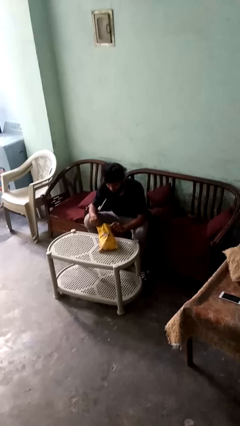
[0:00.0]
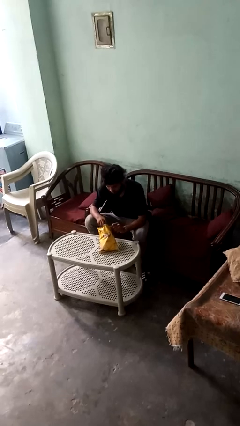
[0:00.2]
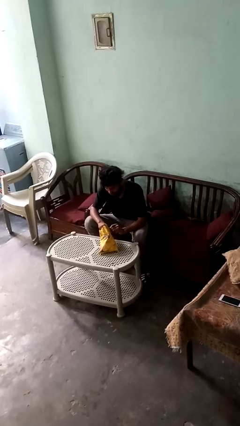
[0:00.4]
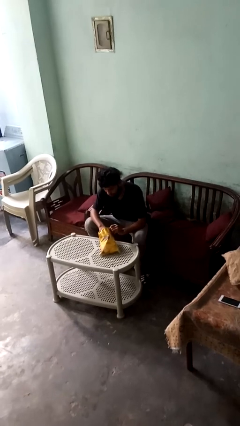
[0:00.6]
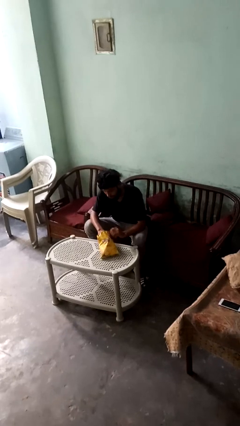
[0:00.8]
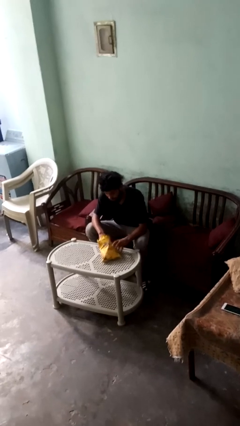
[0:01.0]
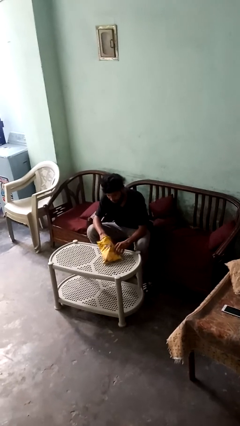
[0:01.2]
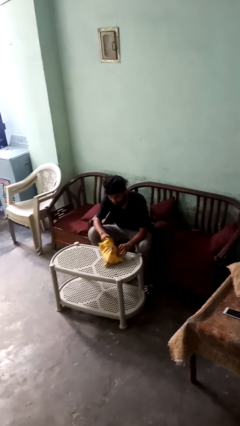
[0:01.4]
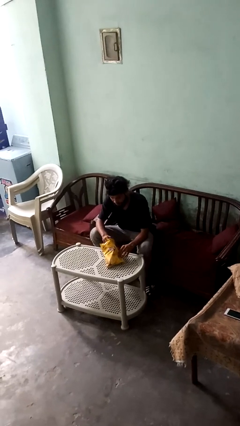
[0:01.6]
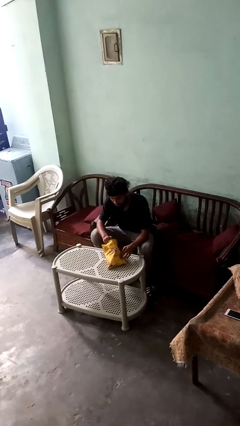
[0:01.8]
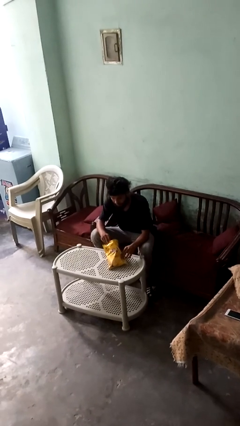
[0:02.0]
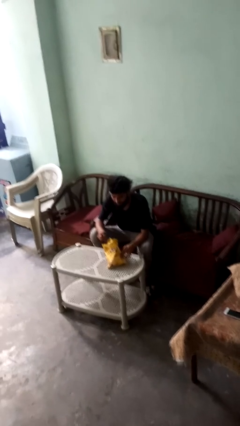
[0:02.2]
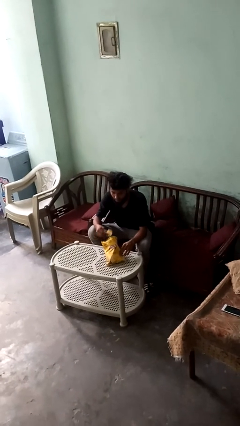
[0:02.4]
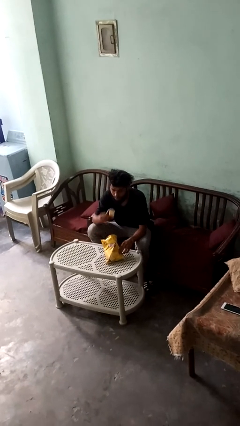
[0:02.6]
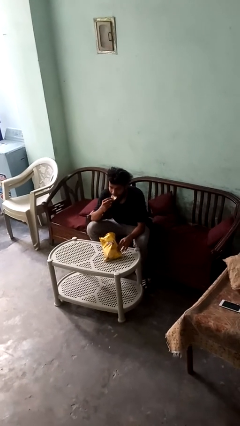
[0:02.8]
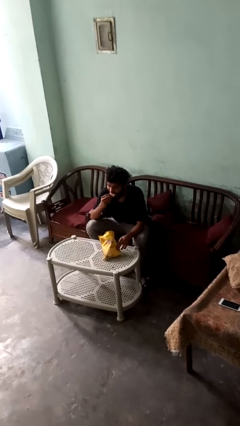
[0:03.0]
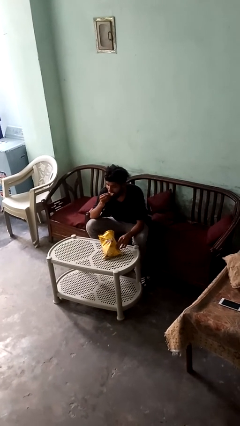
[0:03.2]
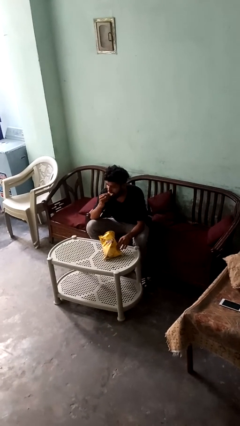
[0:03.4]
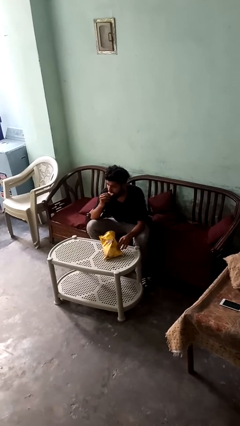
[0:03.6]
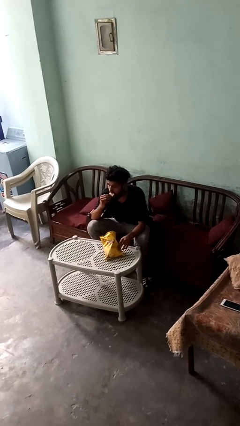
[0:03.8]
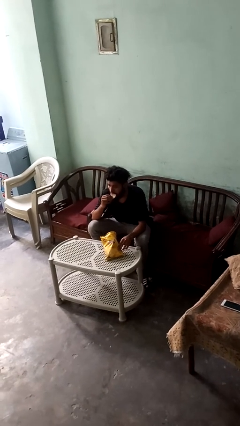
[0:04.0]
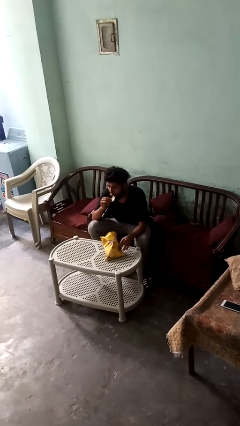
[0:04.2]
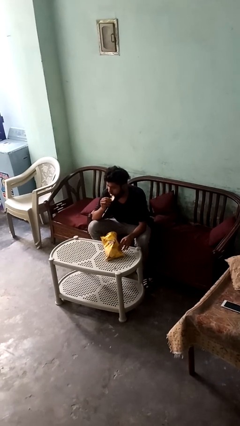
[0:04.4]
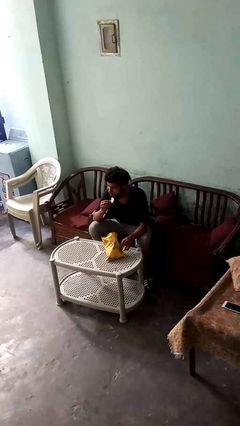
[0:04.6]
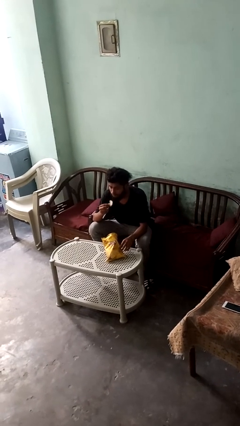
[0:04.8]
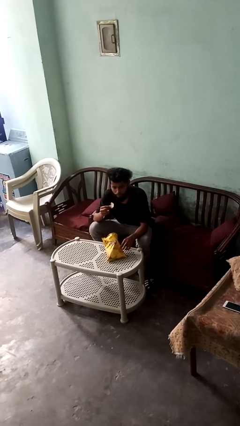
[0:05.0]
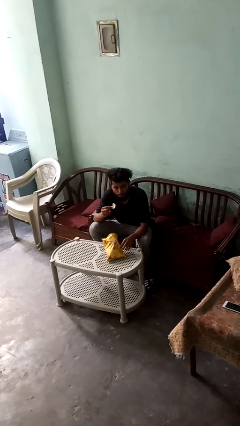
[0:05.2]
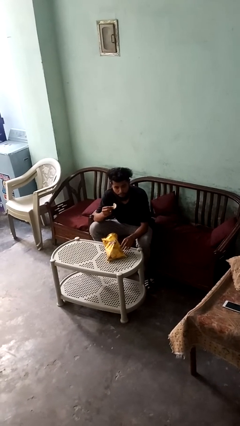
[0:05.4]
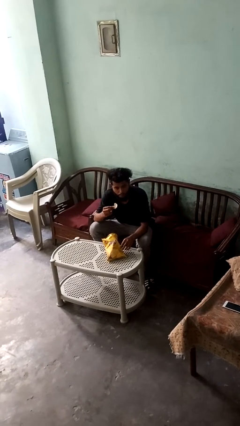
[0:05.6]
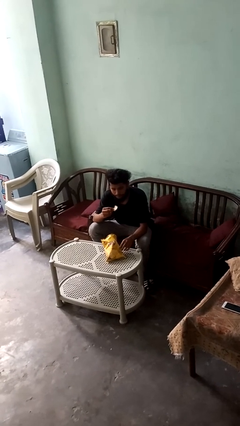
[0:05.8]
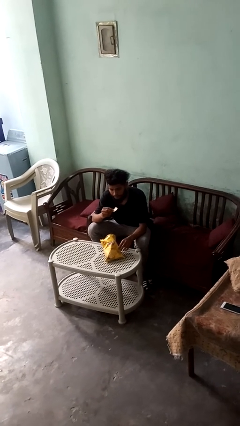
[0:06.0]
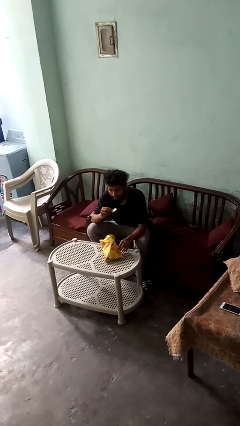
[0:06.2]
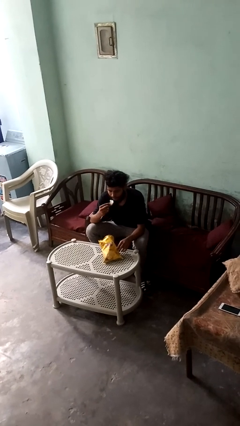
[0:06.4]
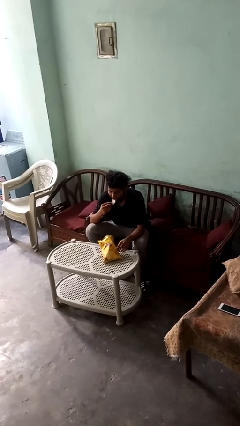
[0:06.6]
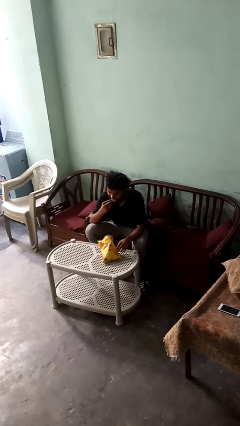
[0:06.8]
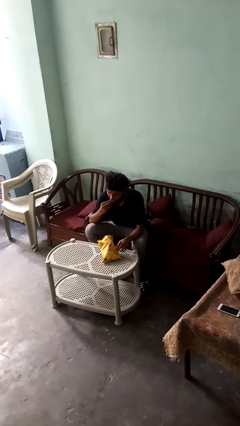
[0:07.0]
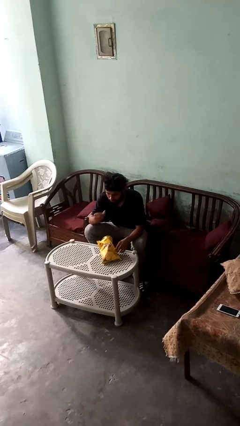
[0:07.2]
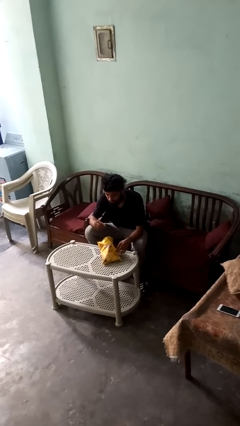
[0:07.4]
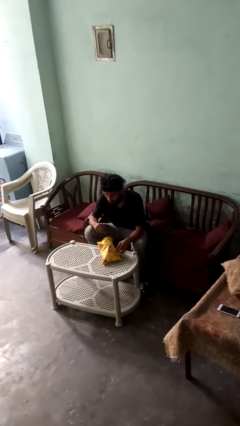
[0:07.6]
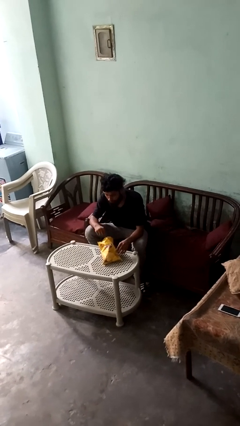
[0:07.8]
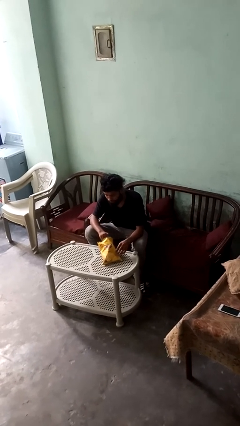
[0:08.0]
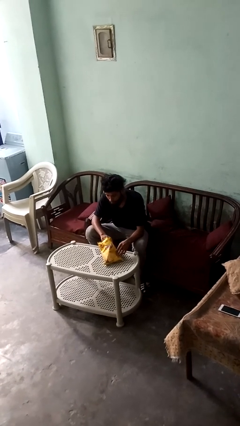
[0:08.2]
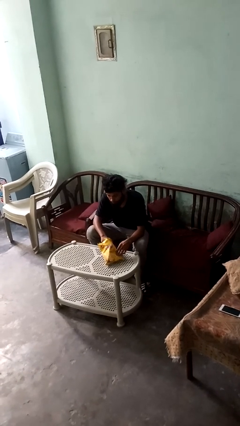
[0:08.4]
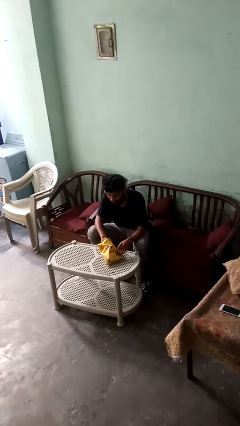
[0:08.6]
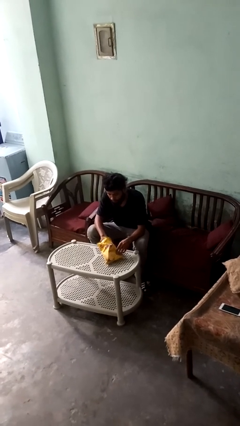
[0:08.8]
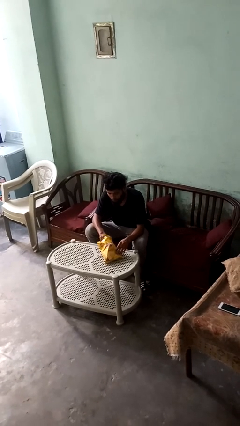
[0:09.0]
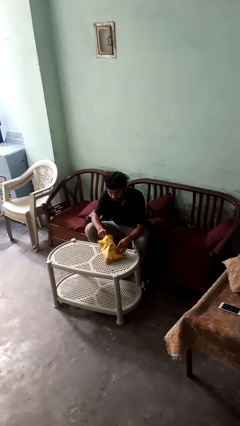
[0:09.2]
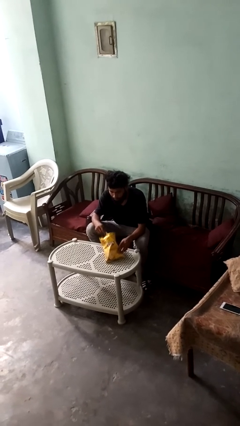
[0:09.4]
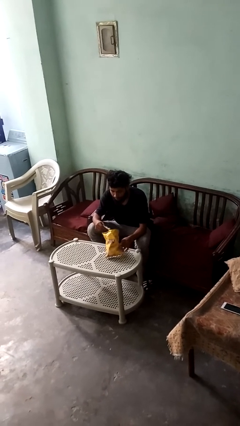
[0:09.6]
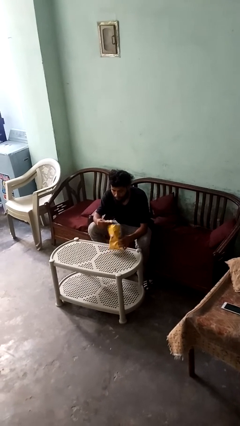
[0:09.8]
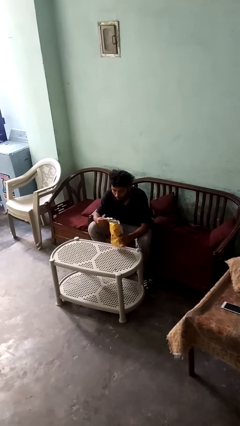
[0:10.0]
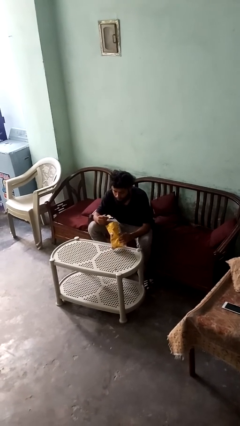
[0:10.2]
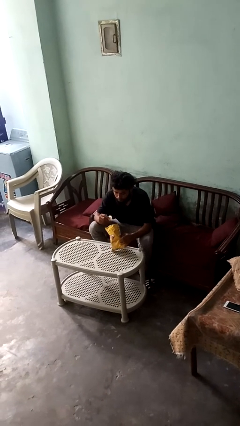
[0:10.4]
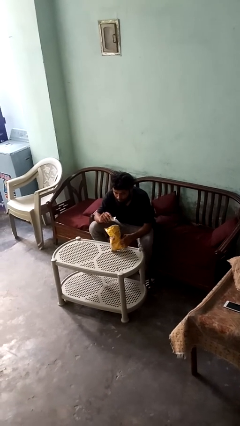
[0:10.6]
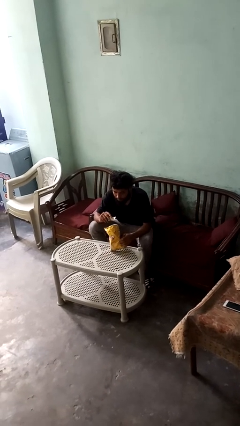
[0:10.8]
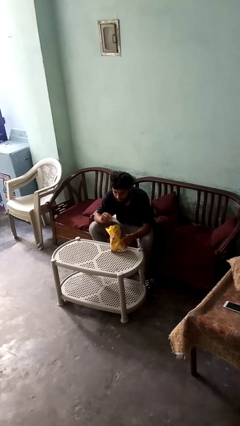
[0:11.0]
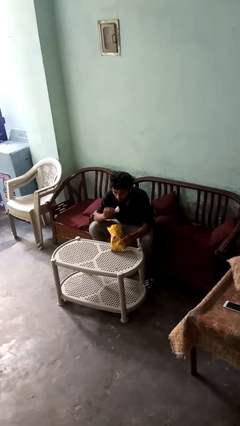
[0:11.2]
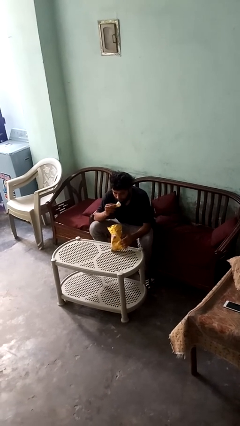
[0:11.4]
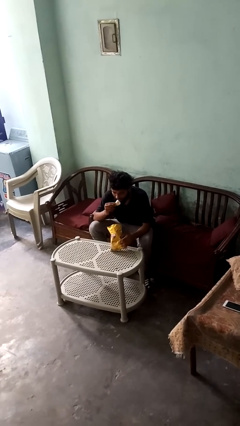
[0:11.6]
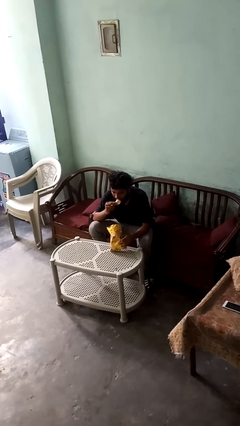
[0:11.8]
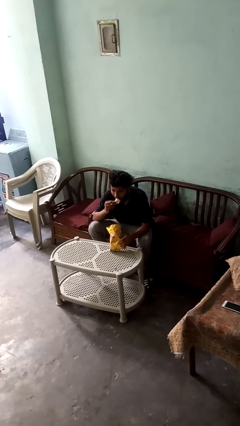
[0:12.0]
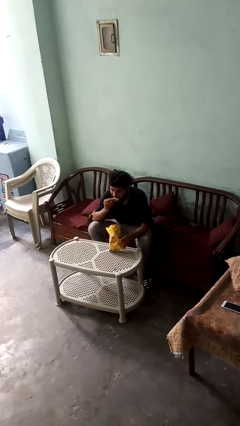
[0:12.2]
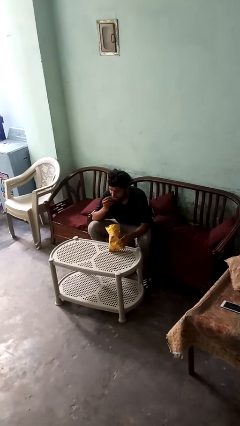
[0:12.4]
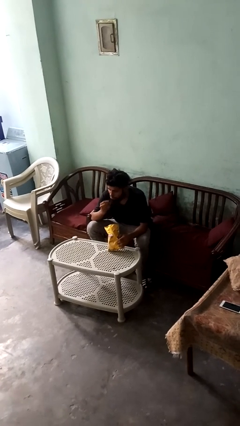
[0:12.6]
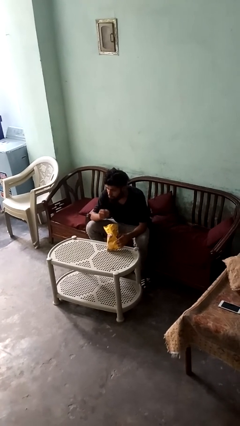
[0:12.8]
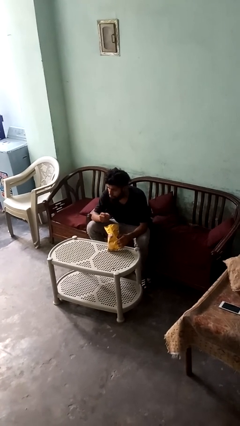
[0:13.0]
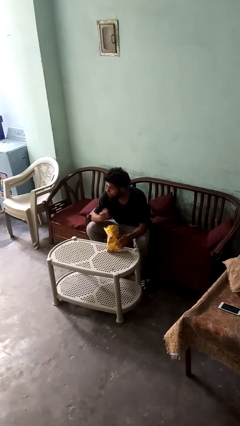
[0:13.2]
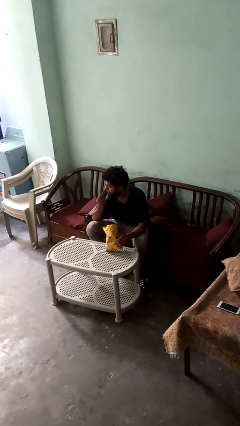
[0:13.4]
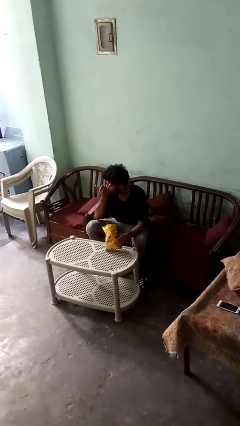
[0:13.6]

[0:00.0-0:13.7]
person eats snack from bag

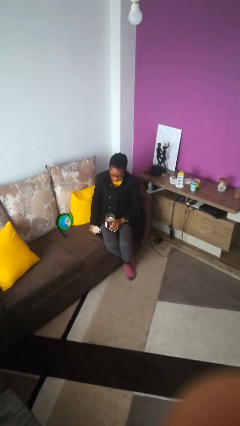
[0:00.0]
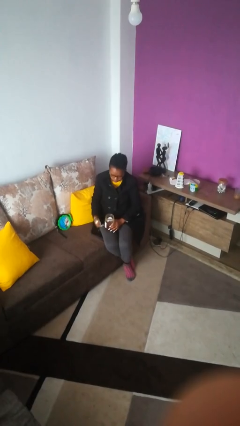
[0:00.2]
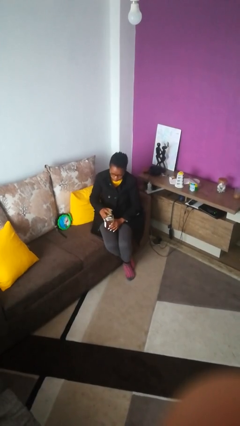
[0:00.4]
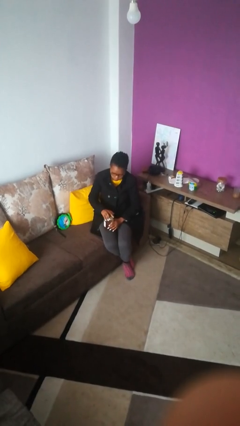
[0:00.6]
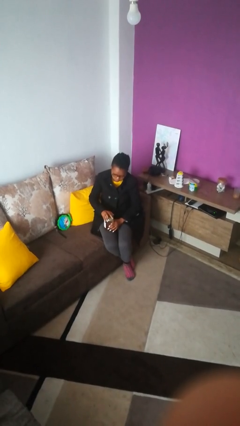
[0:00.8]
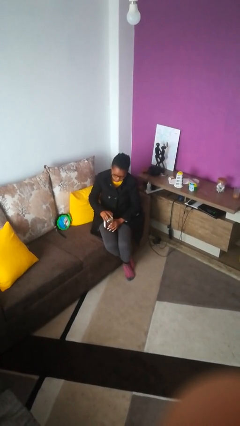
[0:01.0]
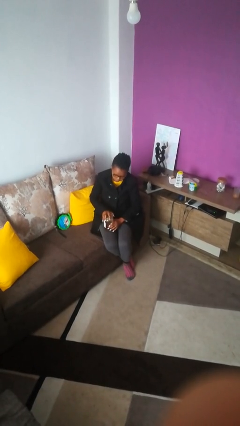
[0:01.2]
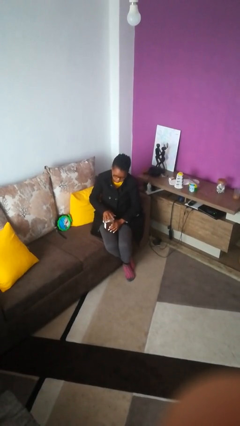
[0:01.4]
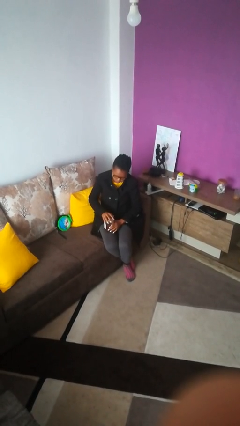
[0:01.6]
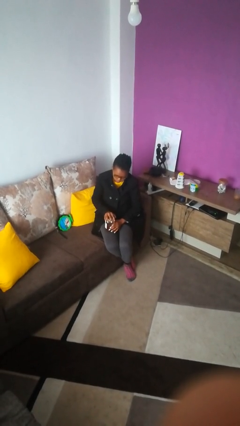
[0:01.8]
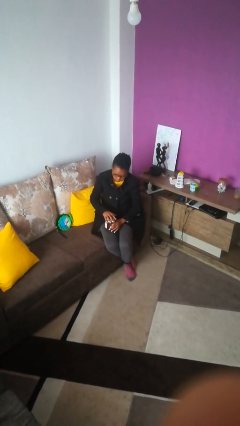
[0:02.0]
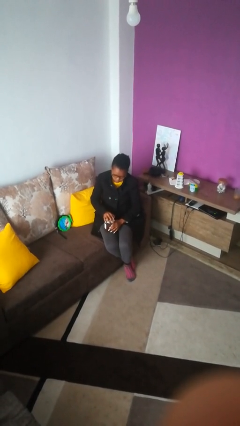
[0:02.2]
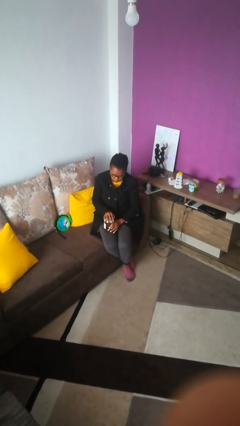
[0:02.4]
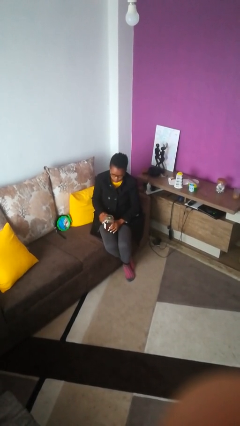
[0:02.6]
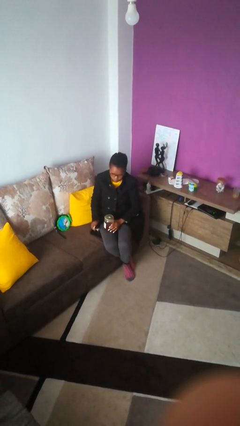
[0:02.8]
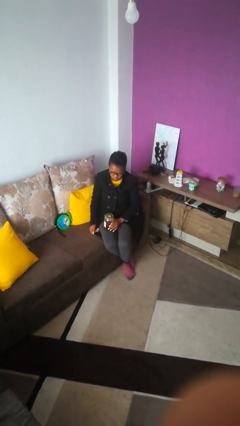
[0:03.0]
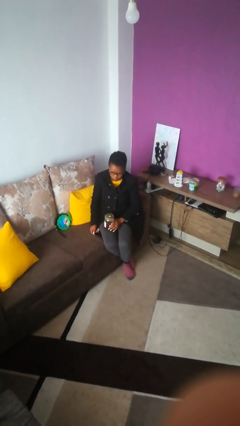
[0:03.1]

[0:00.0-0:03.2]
person closes jar

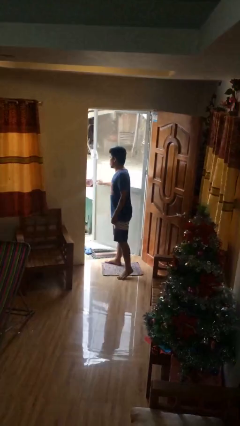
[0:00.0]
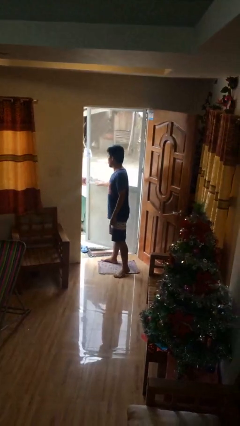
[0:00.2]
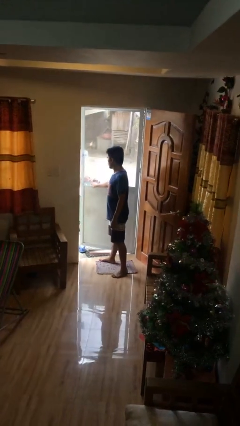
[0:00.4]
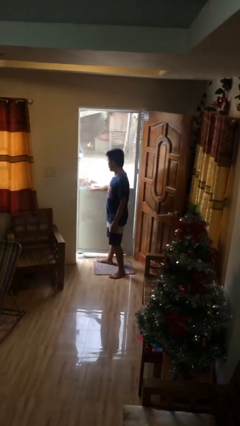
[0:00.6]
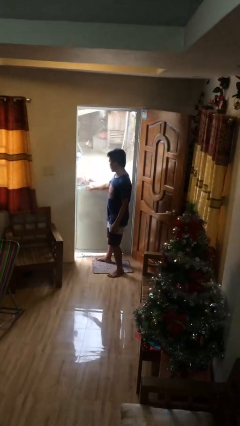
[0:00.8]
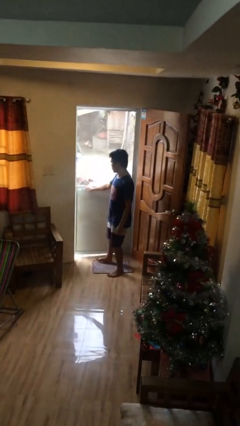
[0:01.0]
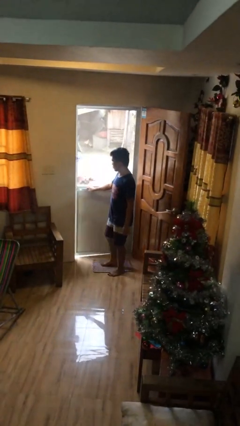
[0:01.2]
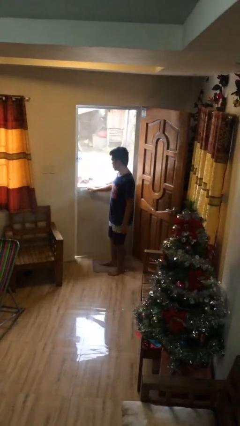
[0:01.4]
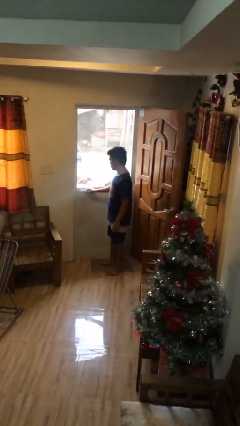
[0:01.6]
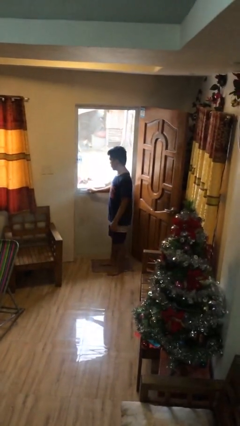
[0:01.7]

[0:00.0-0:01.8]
person closes facility door
